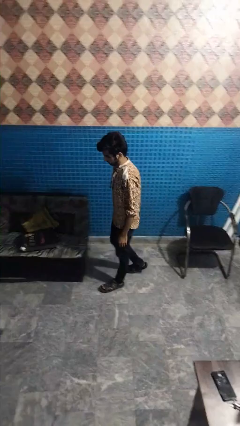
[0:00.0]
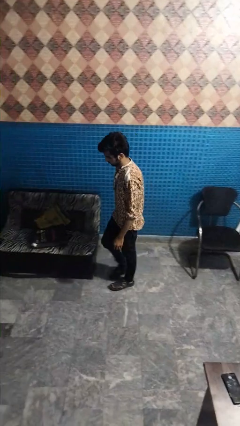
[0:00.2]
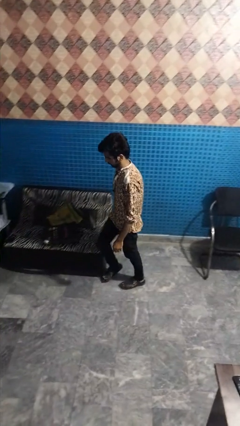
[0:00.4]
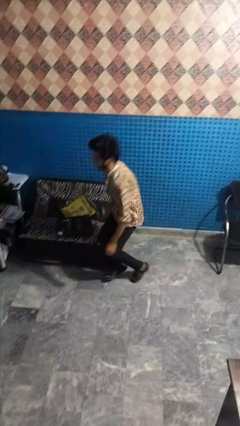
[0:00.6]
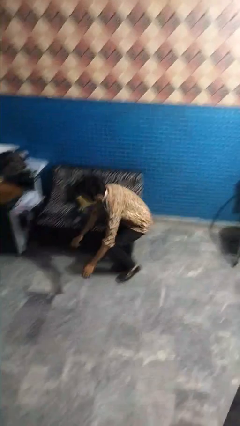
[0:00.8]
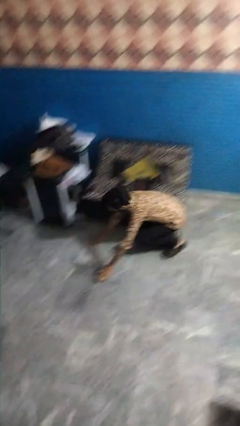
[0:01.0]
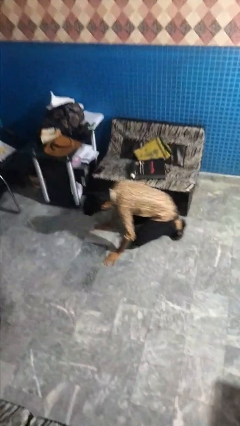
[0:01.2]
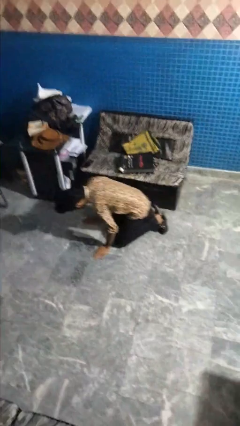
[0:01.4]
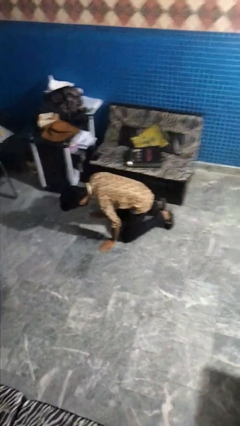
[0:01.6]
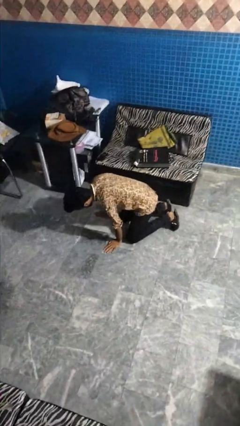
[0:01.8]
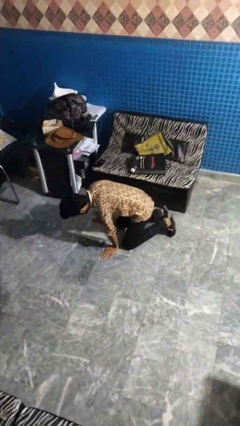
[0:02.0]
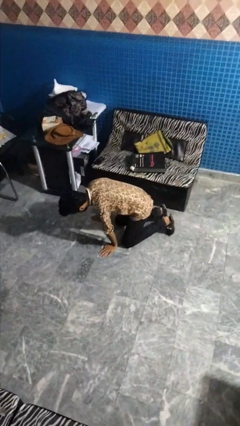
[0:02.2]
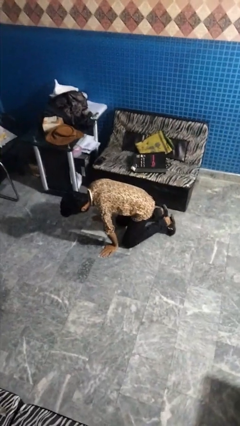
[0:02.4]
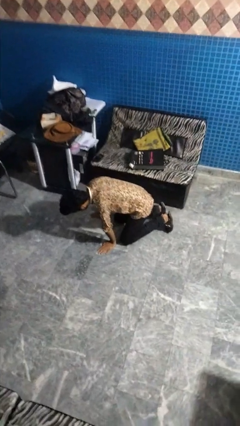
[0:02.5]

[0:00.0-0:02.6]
person trips on object on floor

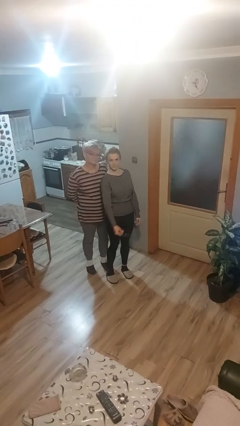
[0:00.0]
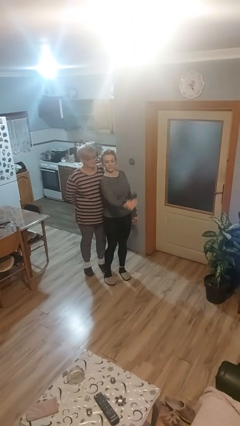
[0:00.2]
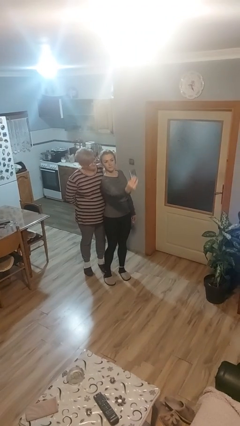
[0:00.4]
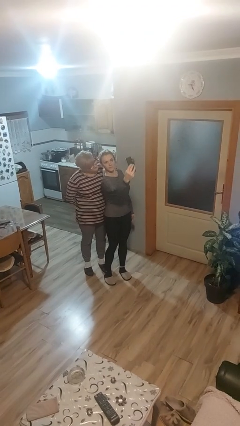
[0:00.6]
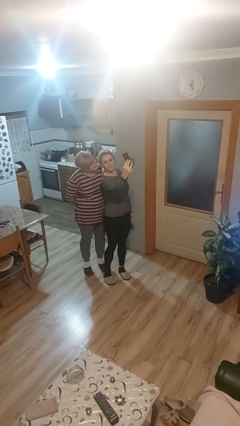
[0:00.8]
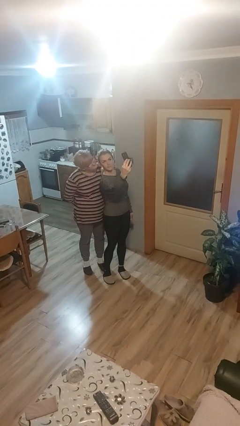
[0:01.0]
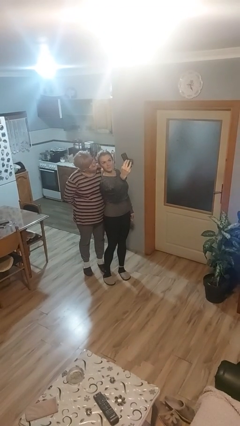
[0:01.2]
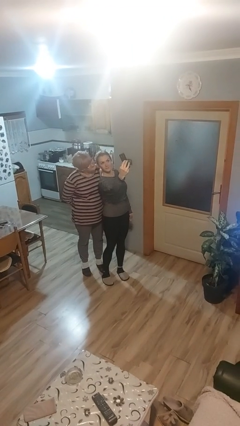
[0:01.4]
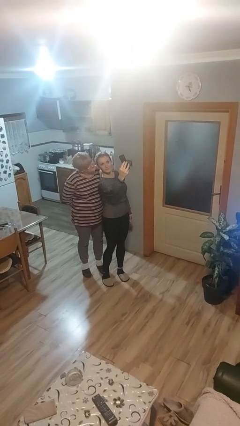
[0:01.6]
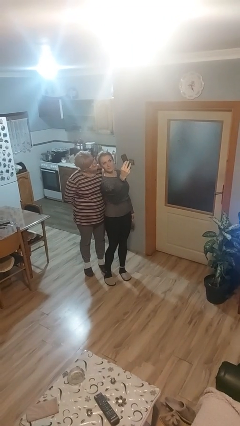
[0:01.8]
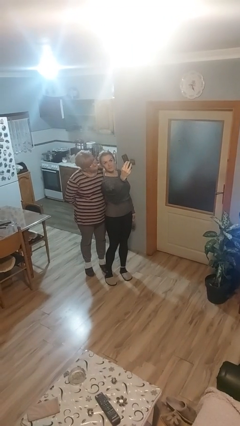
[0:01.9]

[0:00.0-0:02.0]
person takes selfie with person

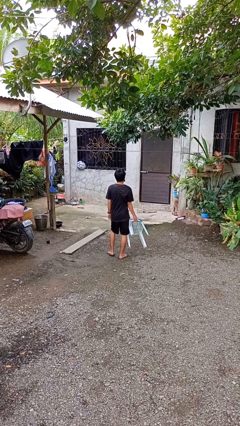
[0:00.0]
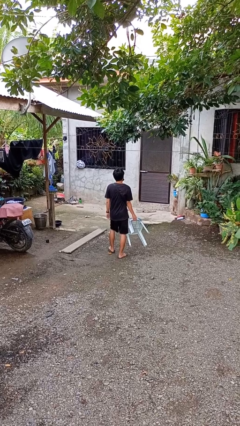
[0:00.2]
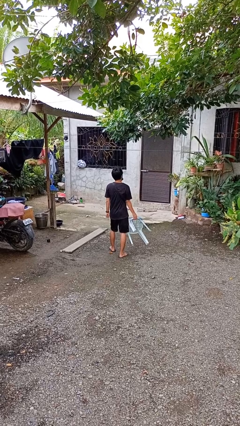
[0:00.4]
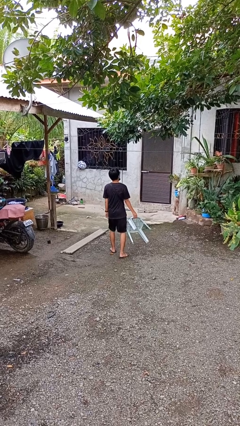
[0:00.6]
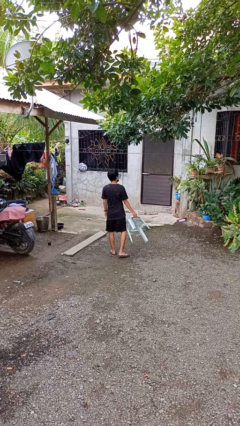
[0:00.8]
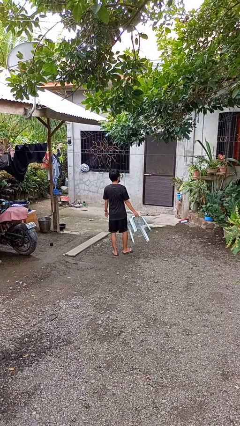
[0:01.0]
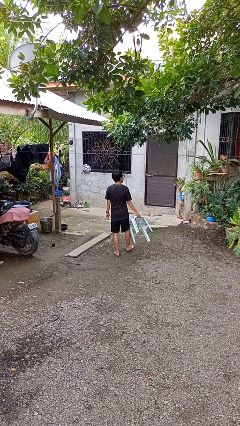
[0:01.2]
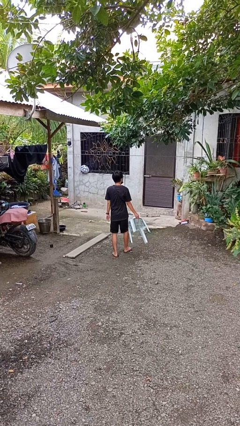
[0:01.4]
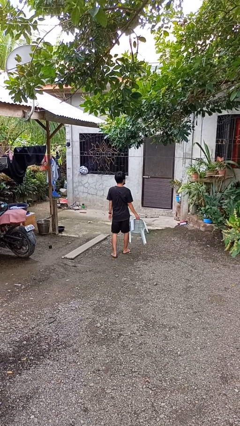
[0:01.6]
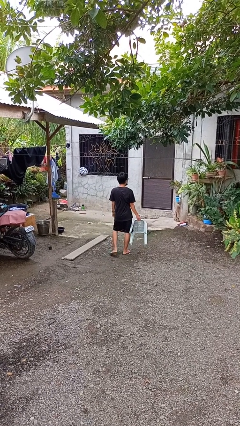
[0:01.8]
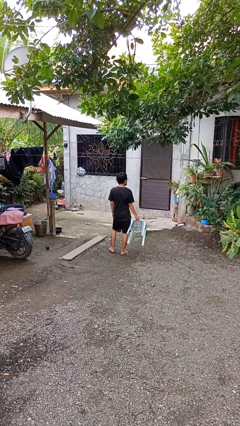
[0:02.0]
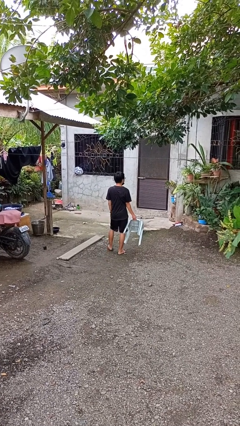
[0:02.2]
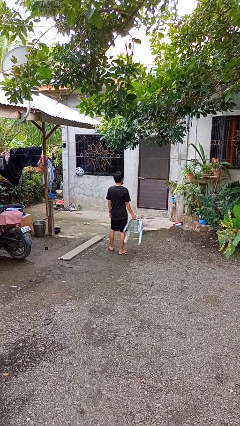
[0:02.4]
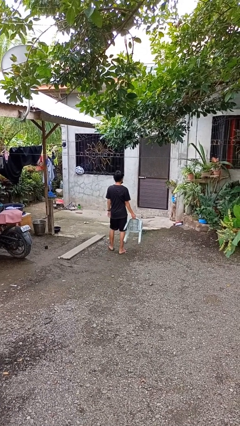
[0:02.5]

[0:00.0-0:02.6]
person carries furniture

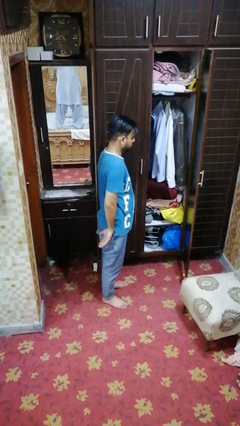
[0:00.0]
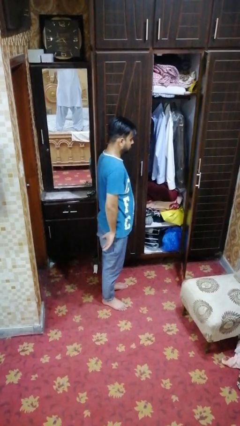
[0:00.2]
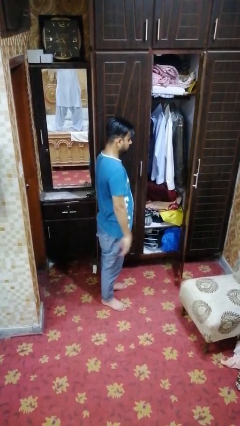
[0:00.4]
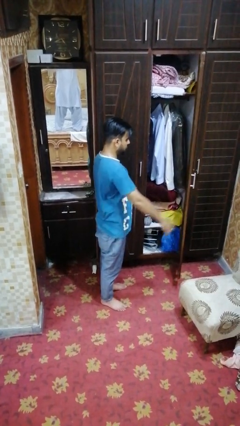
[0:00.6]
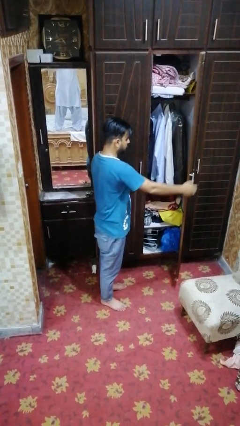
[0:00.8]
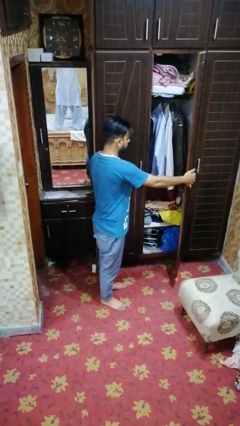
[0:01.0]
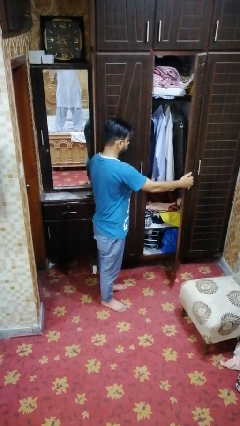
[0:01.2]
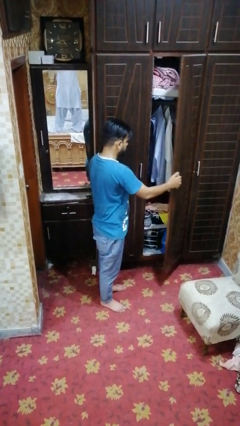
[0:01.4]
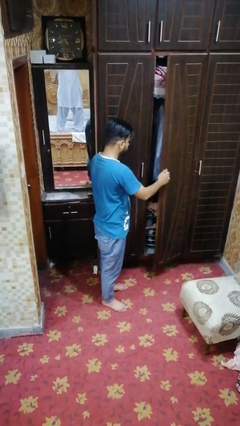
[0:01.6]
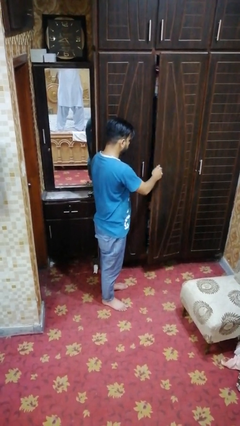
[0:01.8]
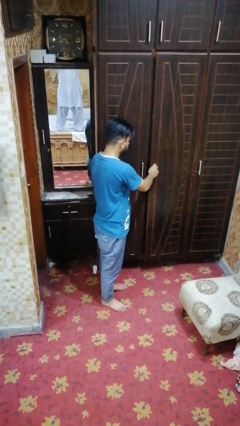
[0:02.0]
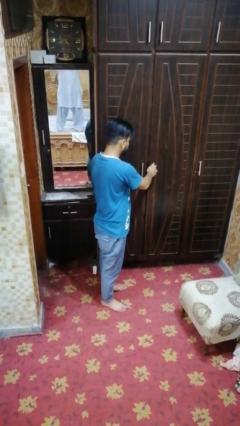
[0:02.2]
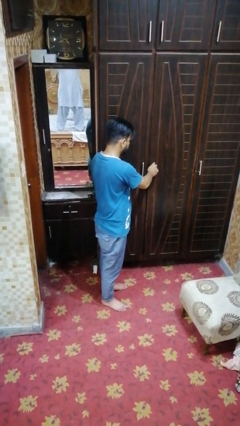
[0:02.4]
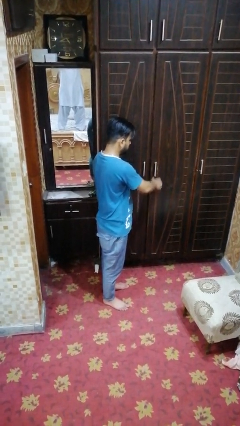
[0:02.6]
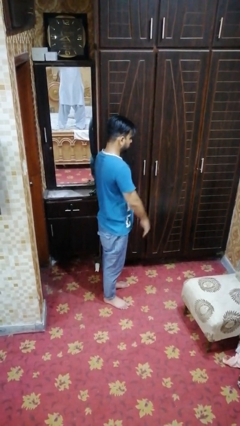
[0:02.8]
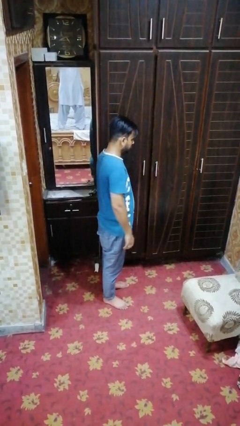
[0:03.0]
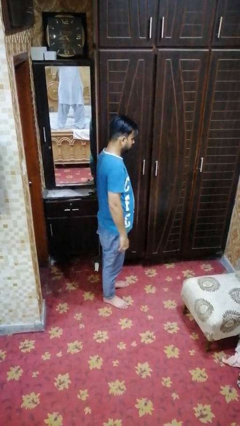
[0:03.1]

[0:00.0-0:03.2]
person closes closet door

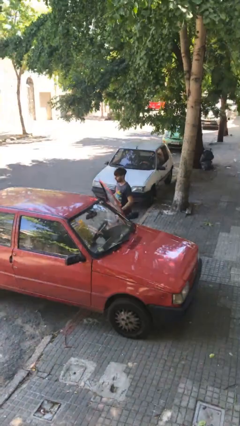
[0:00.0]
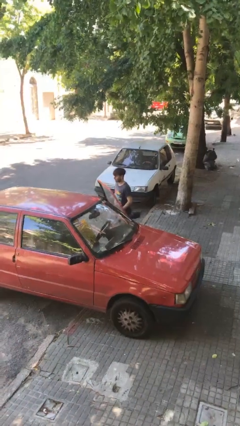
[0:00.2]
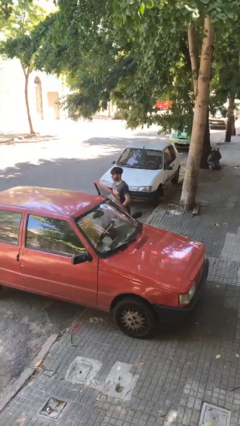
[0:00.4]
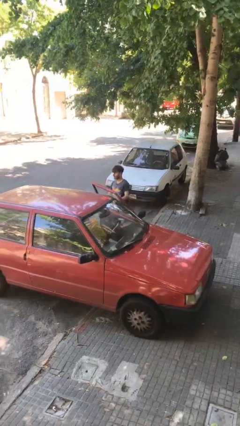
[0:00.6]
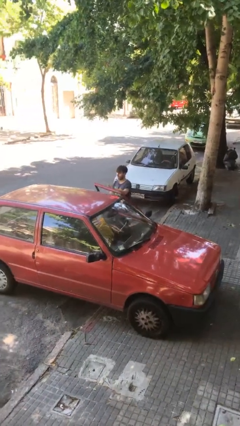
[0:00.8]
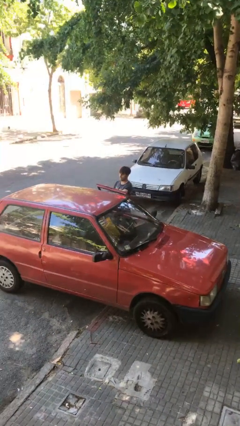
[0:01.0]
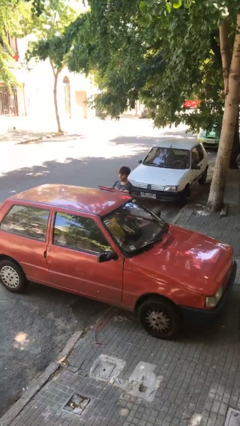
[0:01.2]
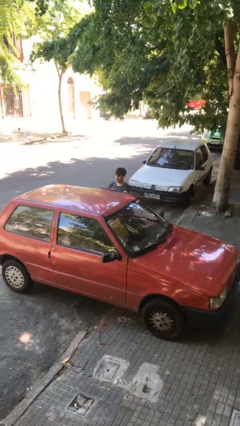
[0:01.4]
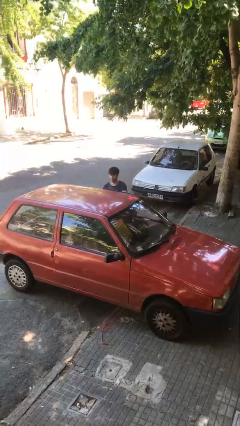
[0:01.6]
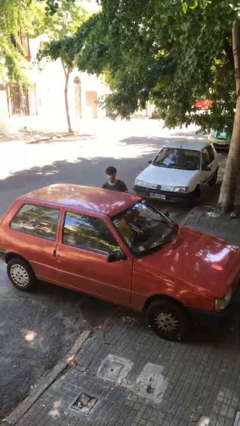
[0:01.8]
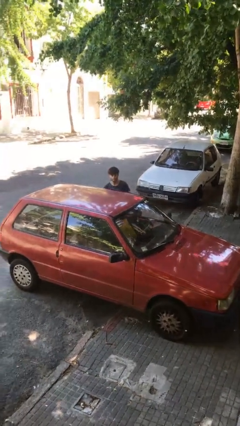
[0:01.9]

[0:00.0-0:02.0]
person closes car door

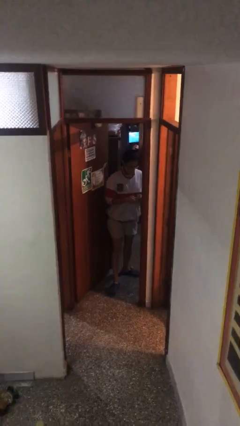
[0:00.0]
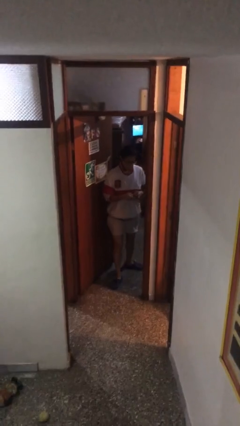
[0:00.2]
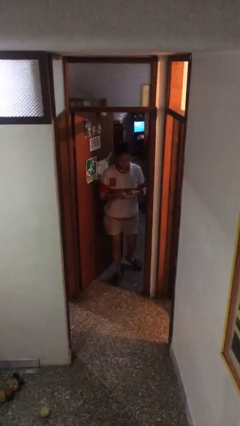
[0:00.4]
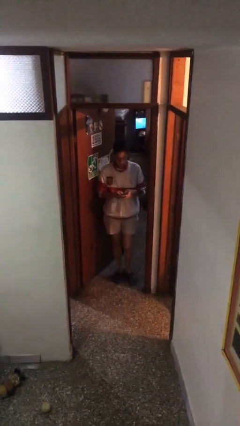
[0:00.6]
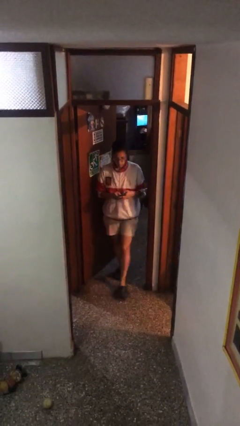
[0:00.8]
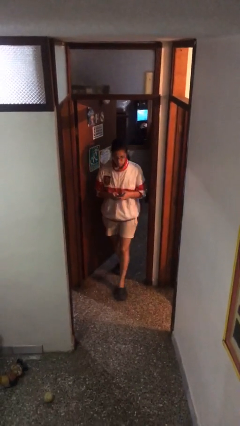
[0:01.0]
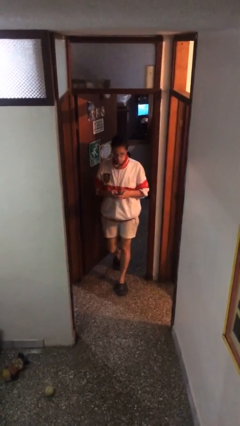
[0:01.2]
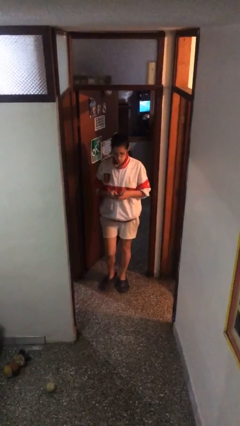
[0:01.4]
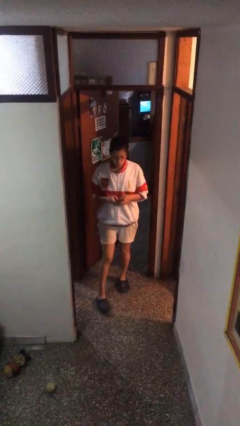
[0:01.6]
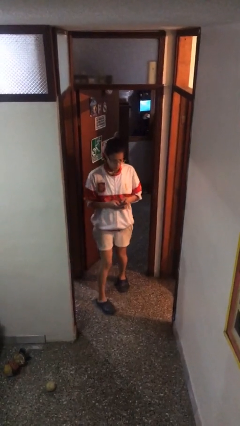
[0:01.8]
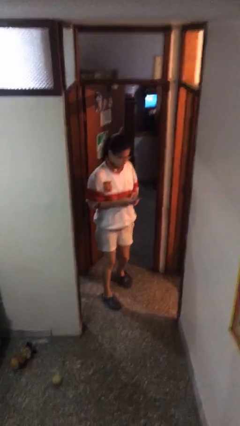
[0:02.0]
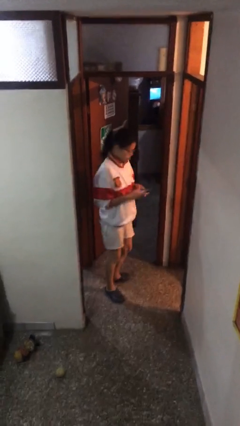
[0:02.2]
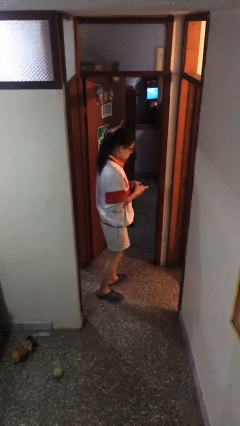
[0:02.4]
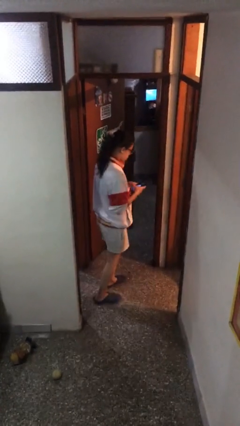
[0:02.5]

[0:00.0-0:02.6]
person enters scene through structure

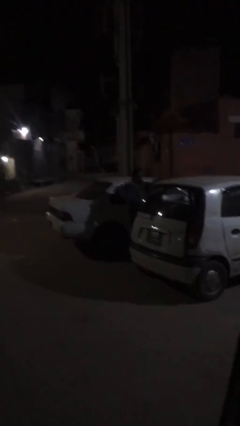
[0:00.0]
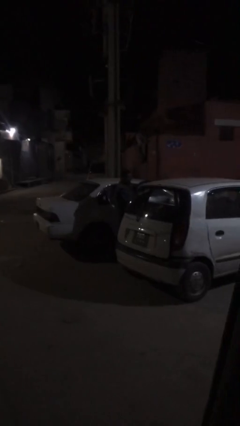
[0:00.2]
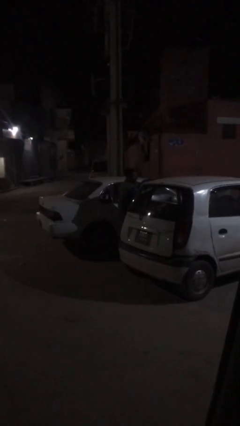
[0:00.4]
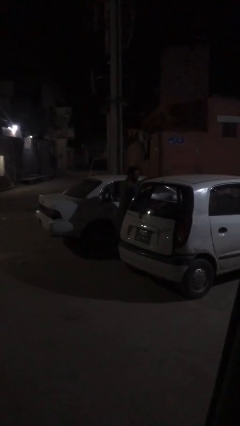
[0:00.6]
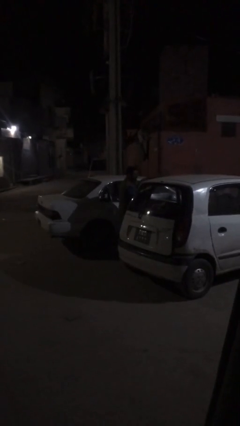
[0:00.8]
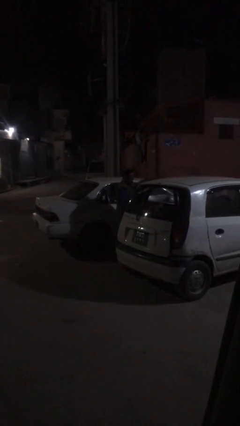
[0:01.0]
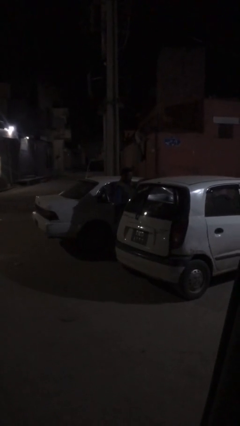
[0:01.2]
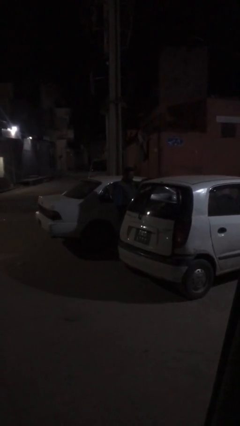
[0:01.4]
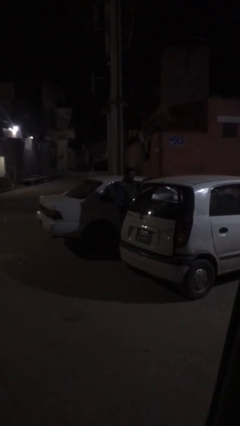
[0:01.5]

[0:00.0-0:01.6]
person loads car
